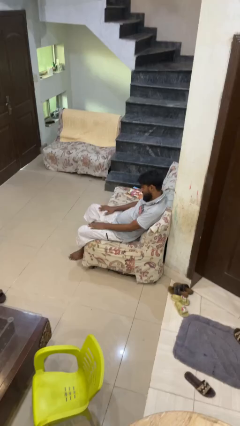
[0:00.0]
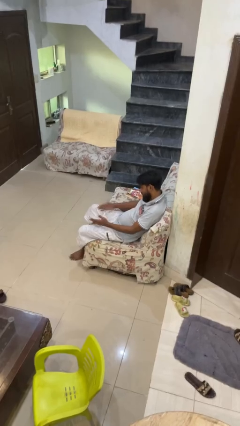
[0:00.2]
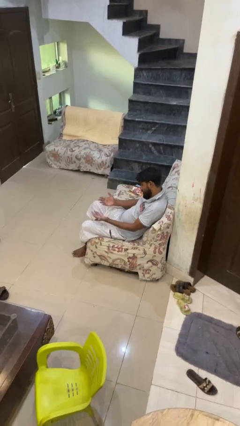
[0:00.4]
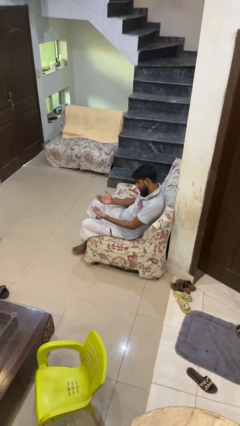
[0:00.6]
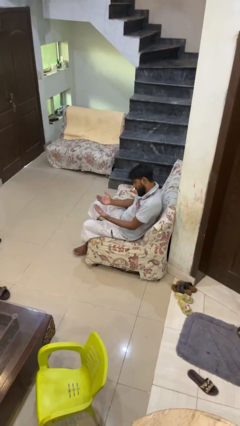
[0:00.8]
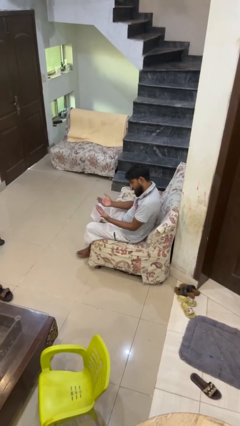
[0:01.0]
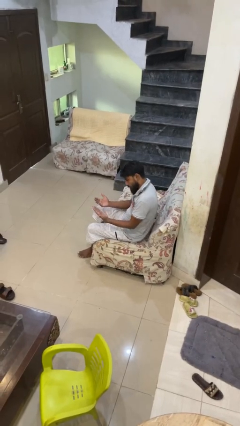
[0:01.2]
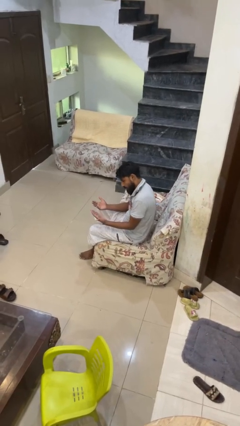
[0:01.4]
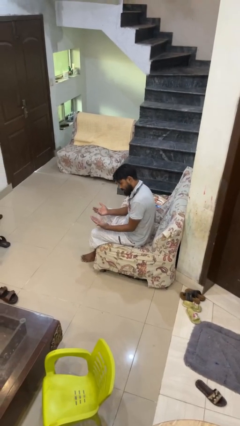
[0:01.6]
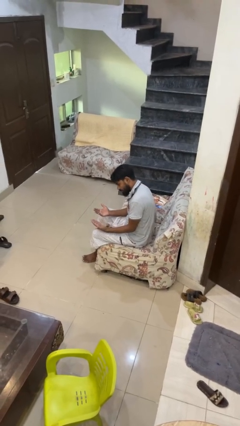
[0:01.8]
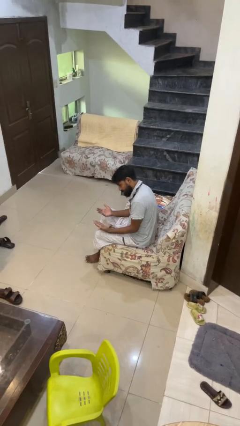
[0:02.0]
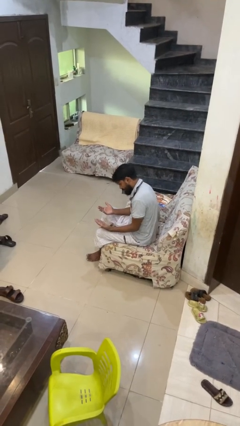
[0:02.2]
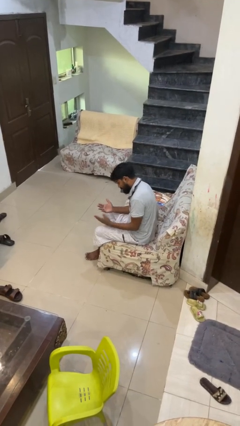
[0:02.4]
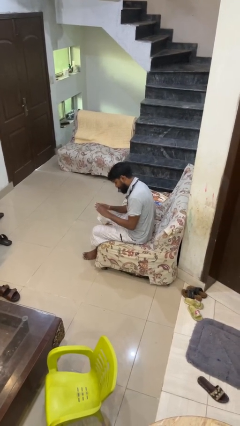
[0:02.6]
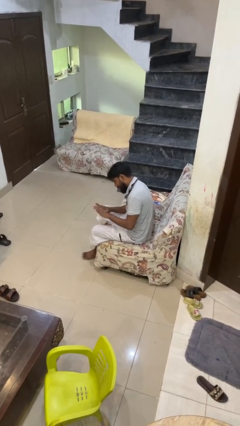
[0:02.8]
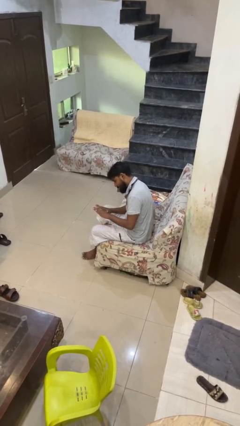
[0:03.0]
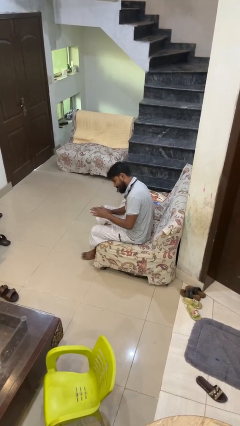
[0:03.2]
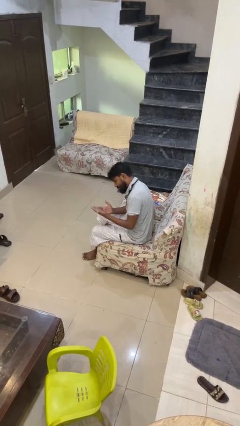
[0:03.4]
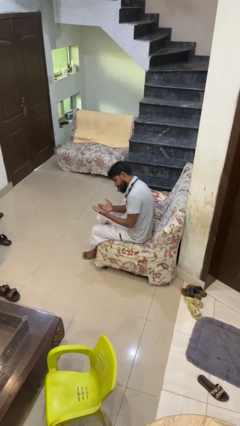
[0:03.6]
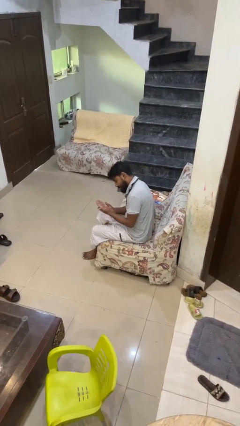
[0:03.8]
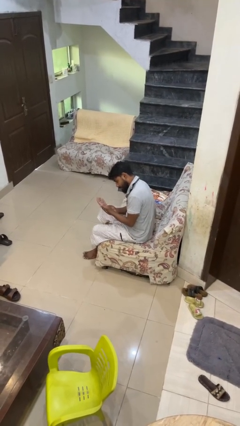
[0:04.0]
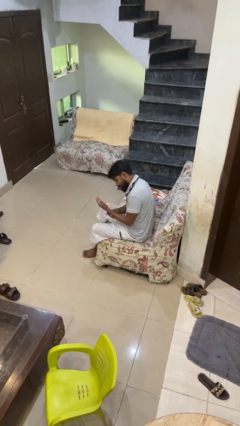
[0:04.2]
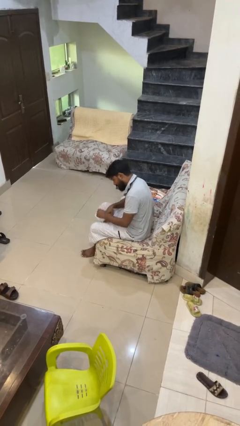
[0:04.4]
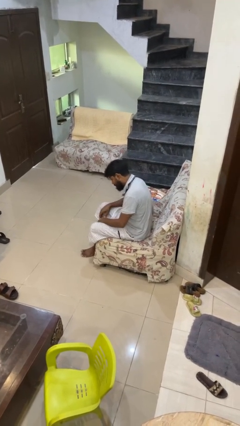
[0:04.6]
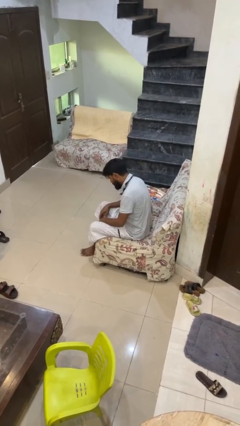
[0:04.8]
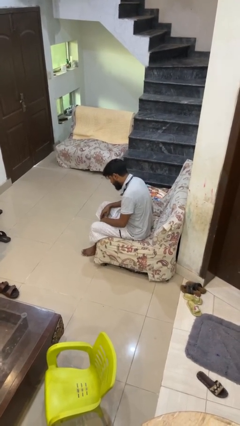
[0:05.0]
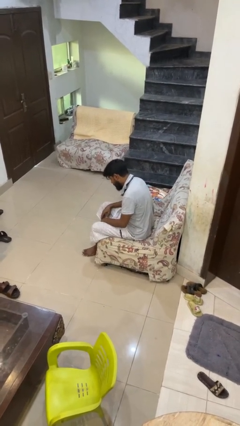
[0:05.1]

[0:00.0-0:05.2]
person looks at hands in lap

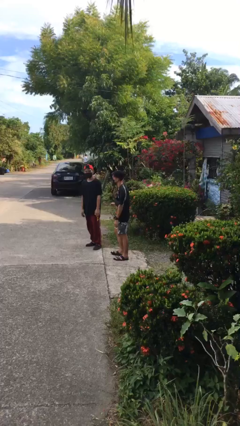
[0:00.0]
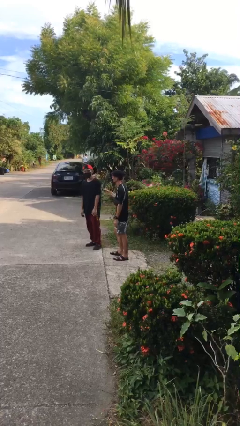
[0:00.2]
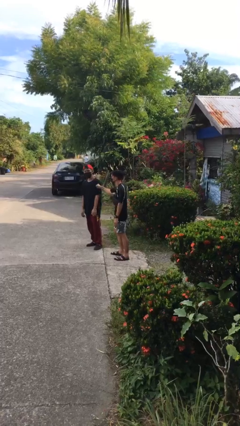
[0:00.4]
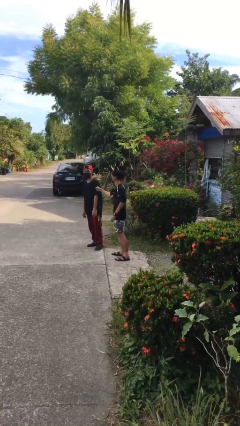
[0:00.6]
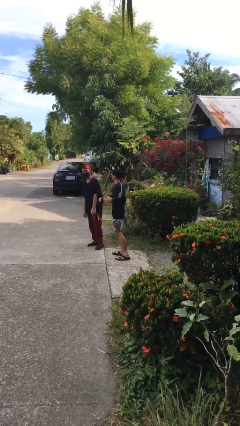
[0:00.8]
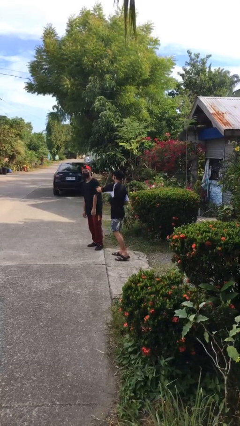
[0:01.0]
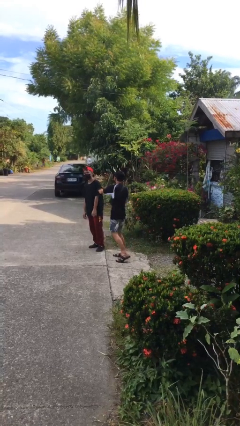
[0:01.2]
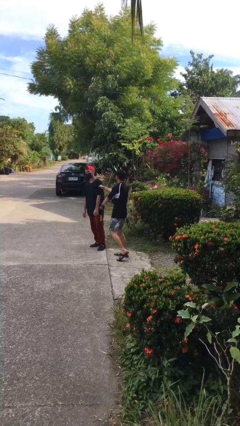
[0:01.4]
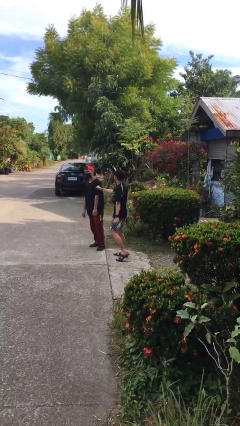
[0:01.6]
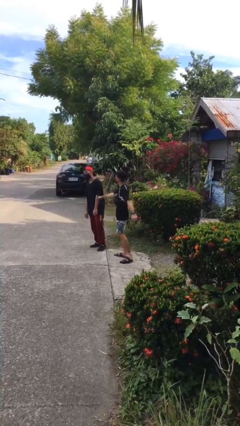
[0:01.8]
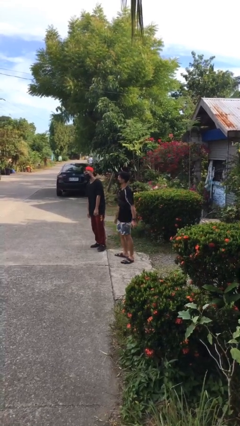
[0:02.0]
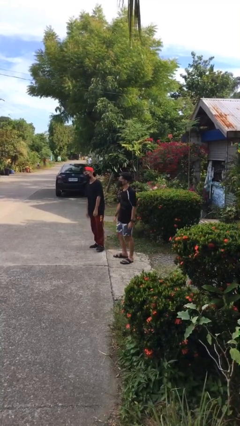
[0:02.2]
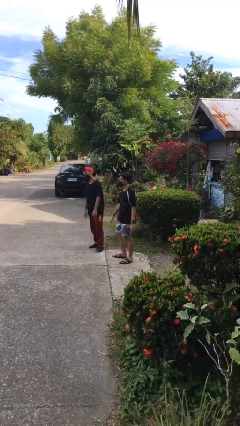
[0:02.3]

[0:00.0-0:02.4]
person pounds shoulders of person

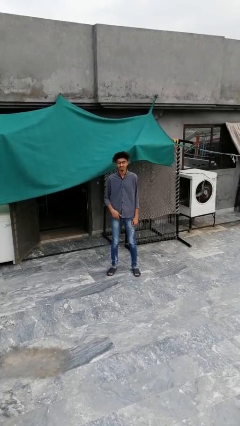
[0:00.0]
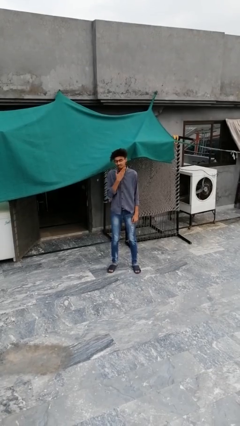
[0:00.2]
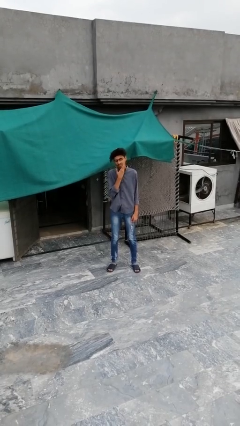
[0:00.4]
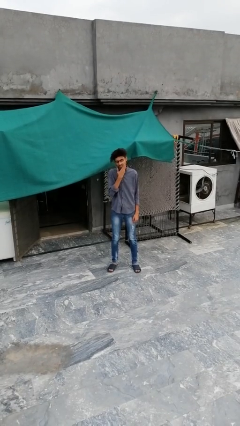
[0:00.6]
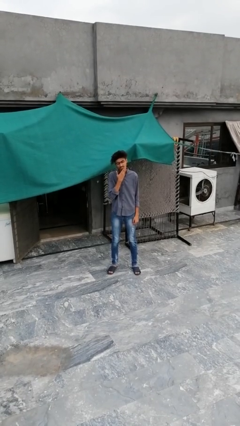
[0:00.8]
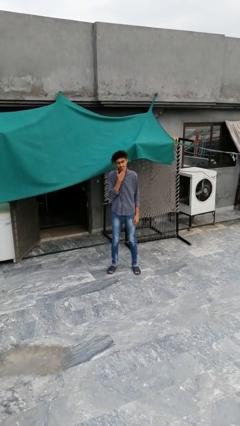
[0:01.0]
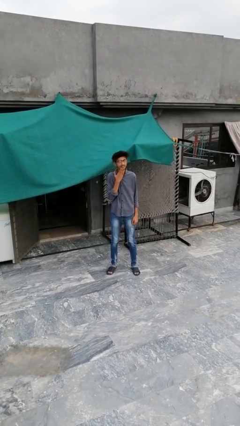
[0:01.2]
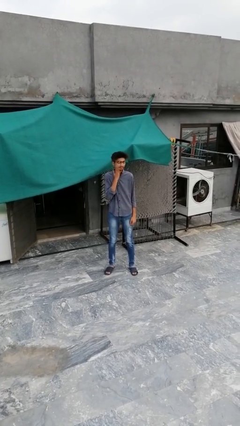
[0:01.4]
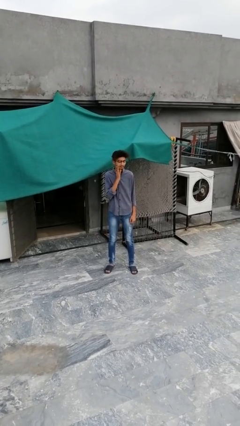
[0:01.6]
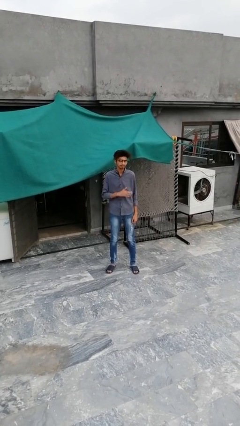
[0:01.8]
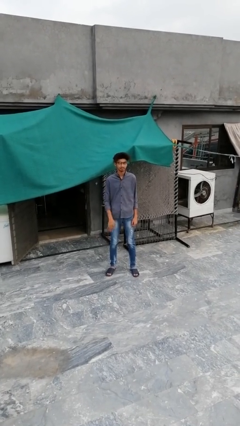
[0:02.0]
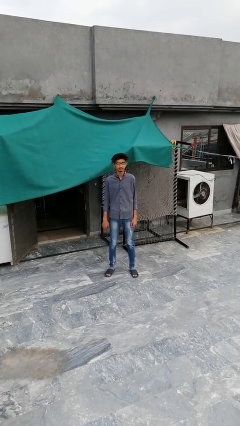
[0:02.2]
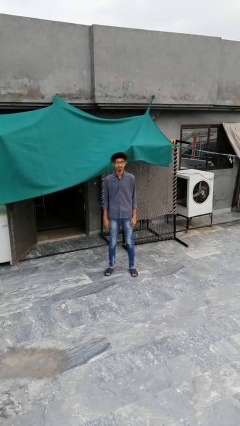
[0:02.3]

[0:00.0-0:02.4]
person strokes chin

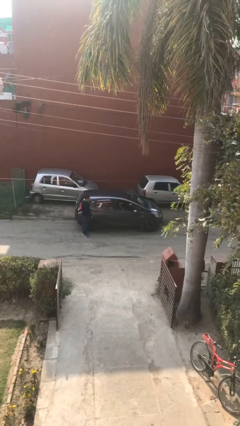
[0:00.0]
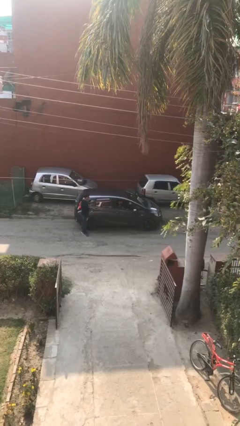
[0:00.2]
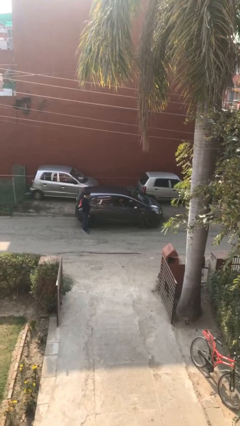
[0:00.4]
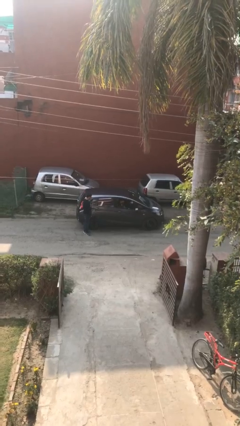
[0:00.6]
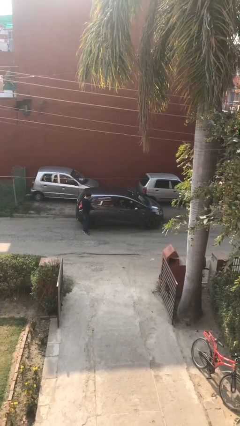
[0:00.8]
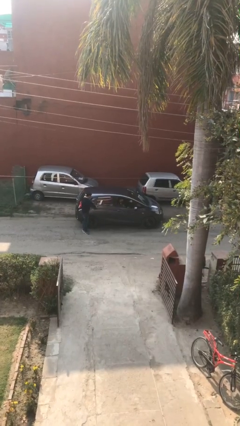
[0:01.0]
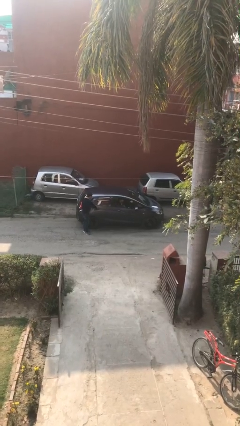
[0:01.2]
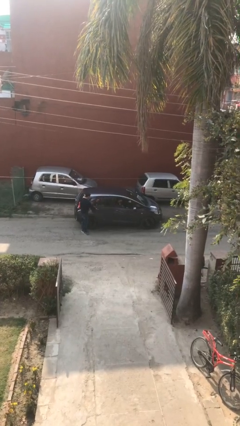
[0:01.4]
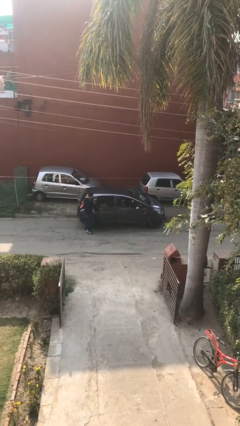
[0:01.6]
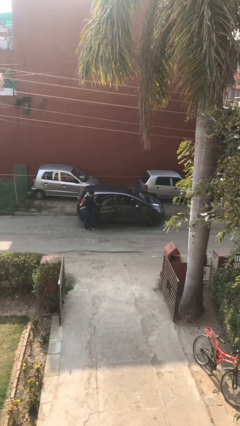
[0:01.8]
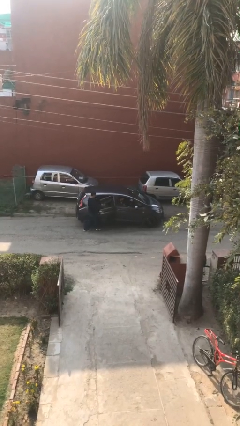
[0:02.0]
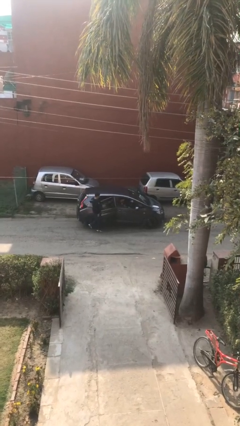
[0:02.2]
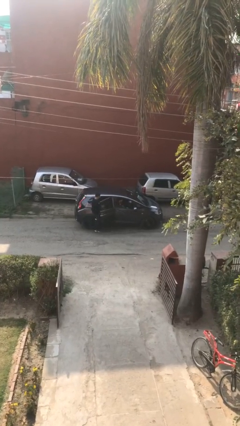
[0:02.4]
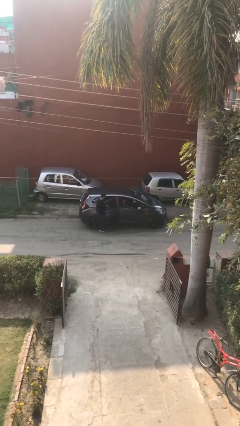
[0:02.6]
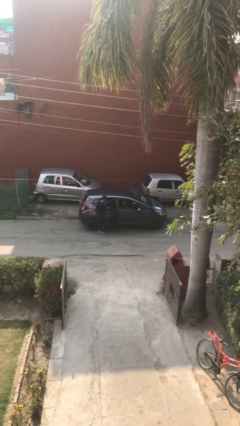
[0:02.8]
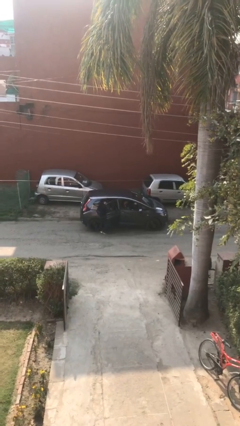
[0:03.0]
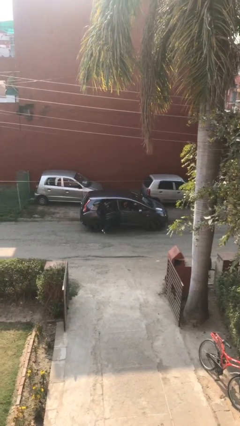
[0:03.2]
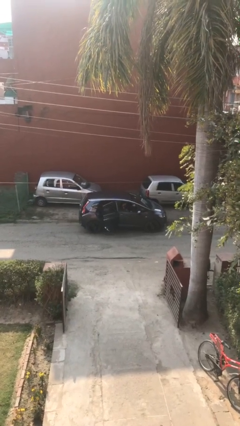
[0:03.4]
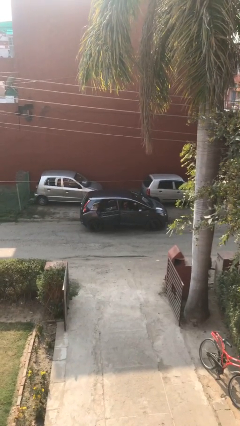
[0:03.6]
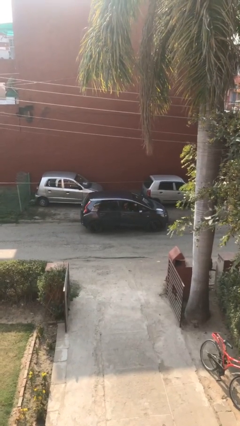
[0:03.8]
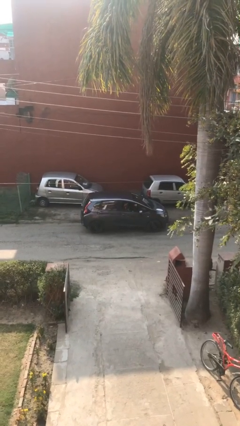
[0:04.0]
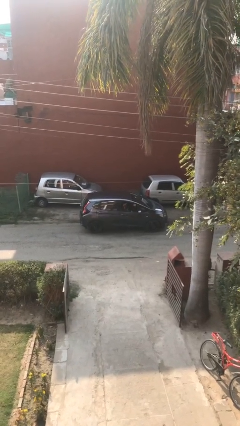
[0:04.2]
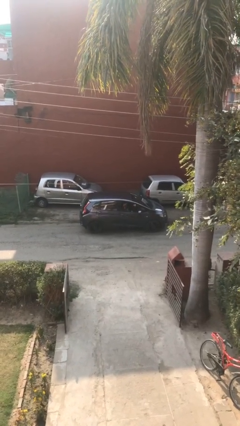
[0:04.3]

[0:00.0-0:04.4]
car picks up person

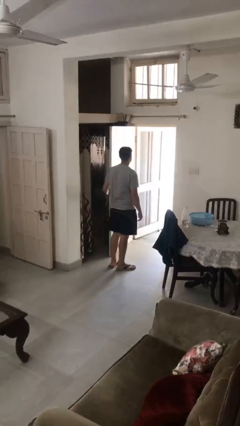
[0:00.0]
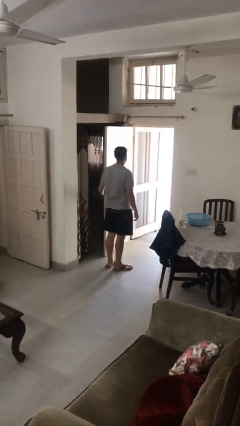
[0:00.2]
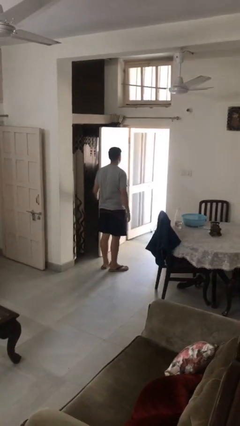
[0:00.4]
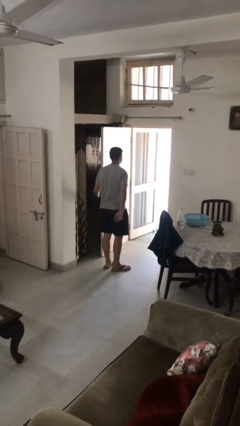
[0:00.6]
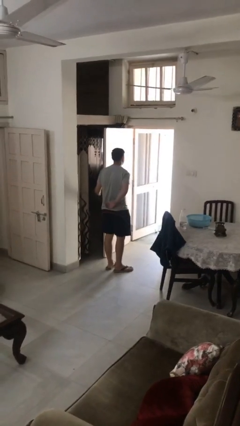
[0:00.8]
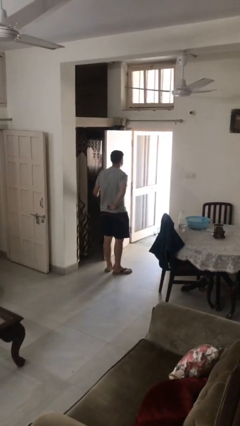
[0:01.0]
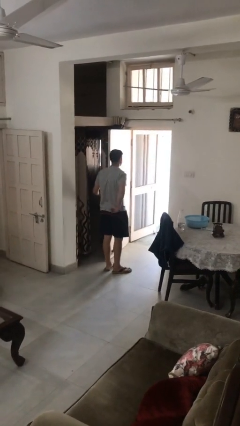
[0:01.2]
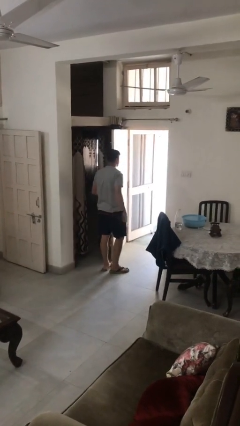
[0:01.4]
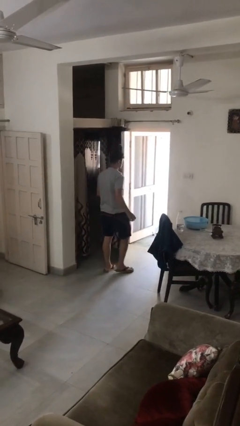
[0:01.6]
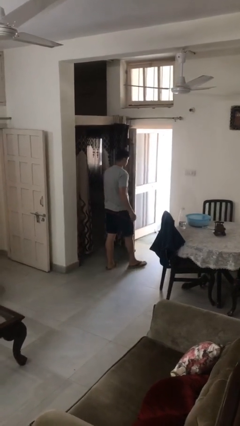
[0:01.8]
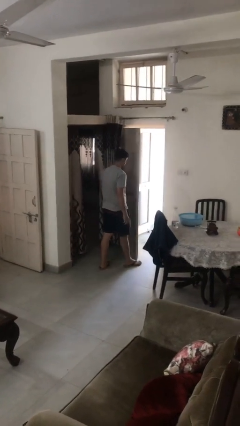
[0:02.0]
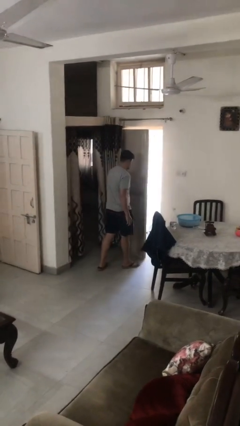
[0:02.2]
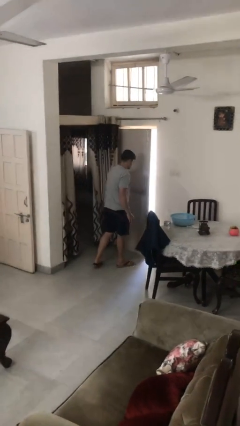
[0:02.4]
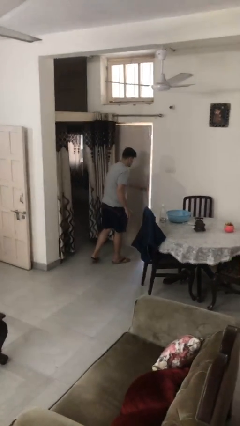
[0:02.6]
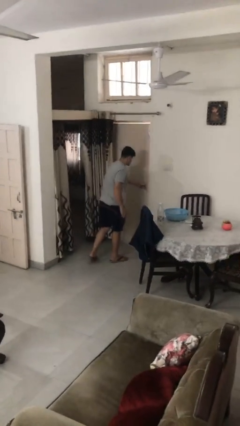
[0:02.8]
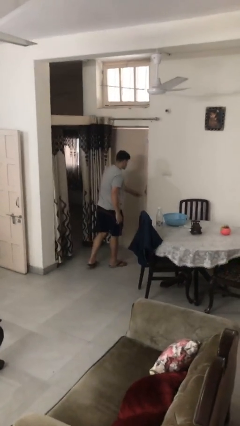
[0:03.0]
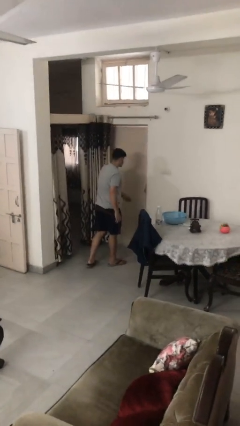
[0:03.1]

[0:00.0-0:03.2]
person closes facility door
